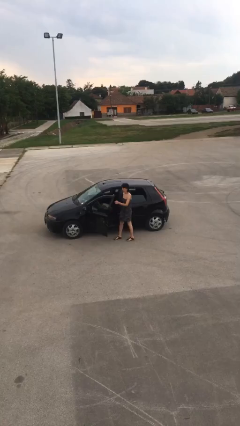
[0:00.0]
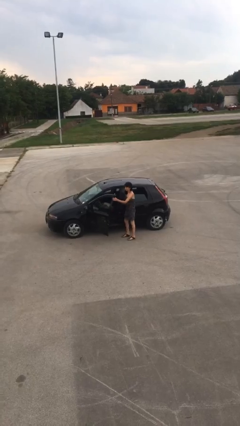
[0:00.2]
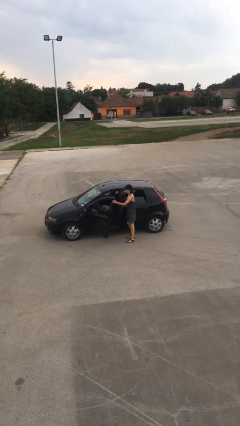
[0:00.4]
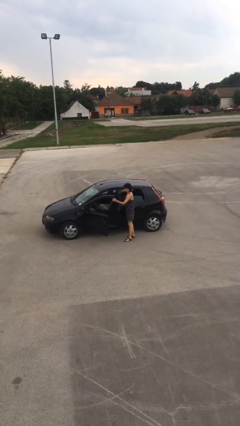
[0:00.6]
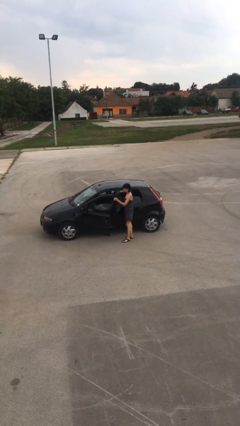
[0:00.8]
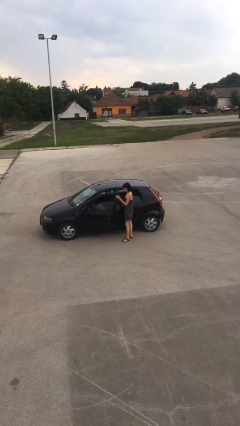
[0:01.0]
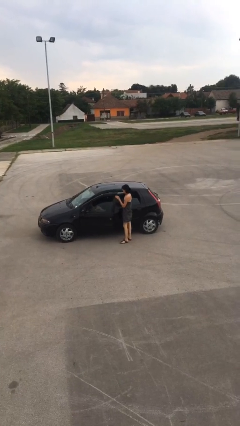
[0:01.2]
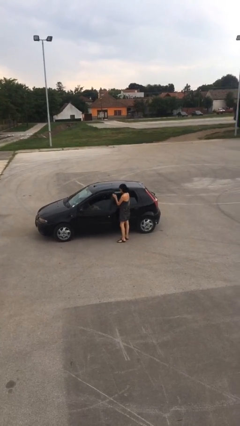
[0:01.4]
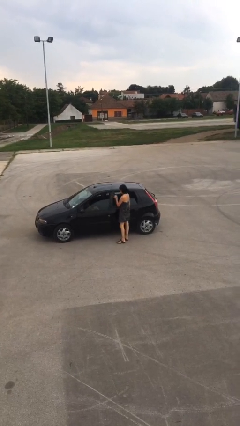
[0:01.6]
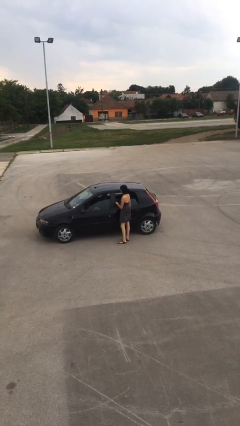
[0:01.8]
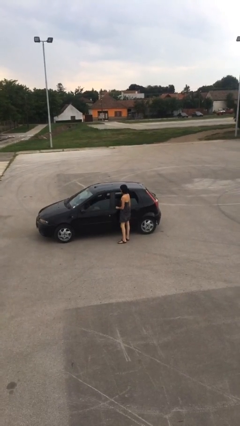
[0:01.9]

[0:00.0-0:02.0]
person closes car door

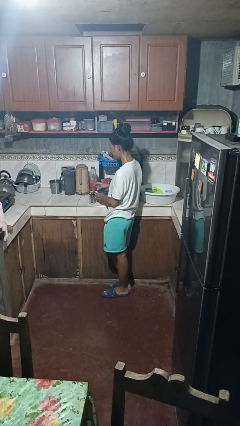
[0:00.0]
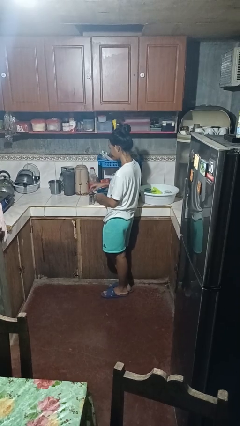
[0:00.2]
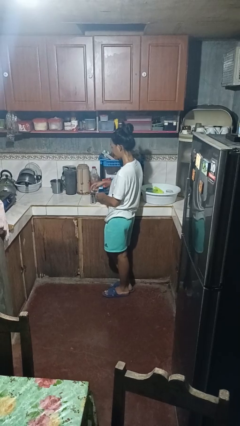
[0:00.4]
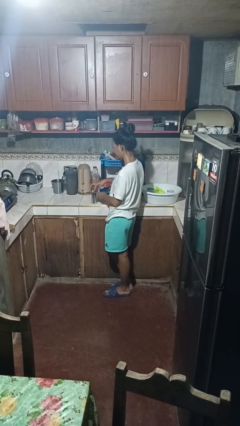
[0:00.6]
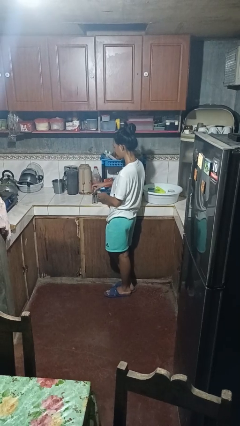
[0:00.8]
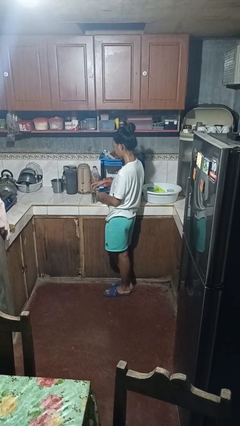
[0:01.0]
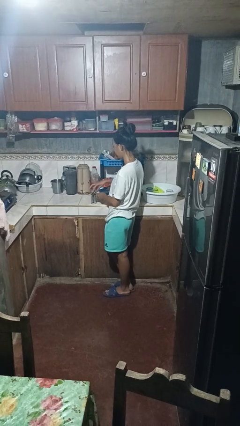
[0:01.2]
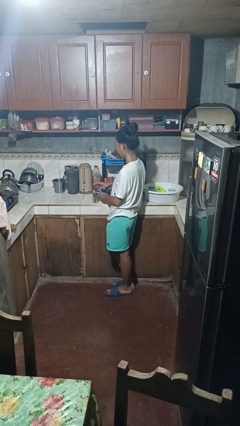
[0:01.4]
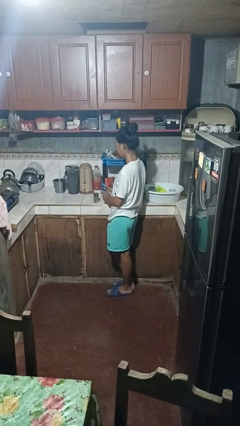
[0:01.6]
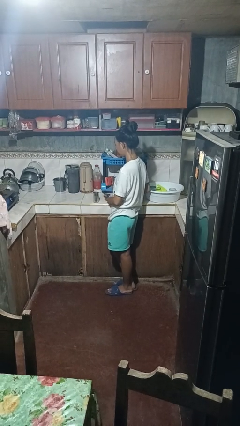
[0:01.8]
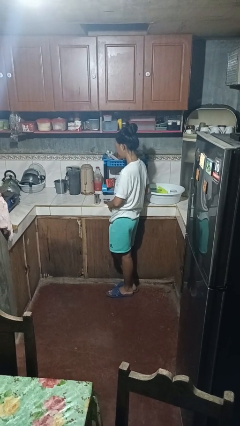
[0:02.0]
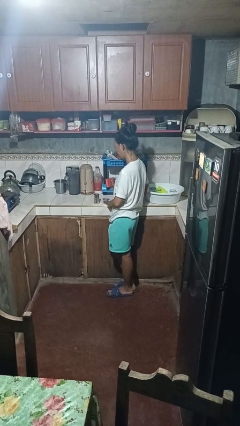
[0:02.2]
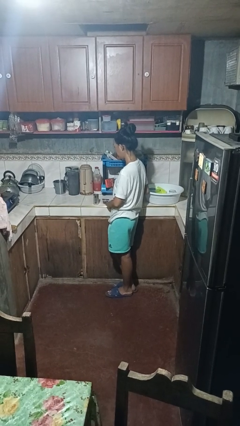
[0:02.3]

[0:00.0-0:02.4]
person opens can with can opener

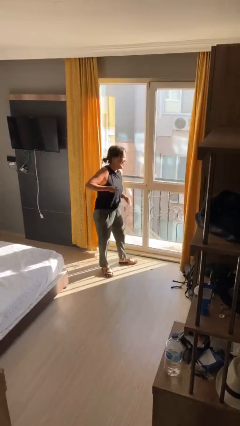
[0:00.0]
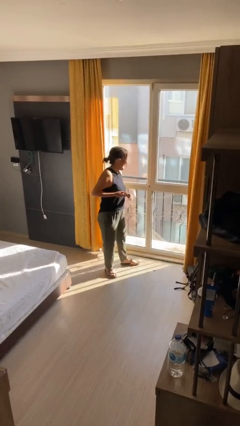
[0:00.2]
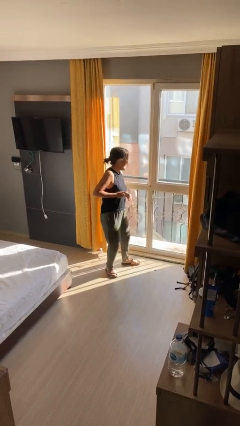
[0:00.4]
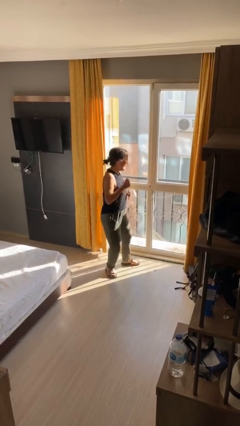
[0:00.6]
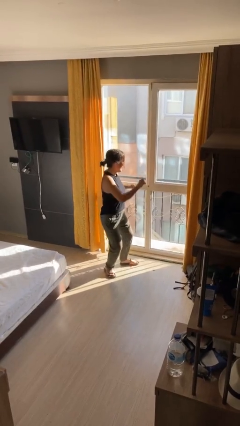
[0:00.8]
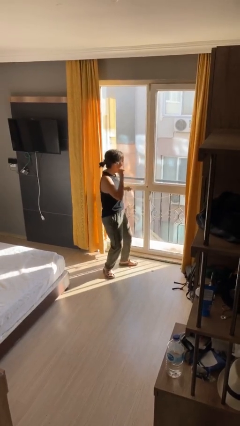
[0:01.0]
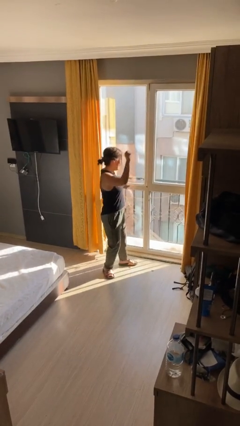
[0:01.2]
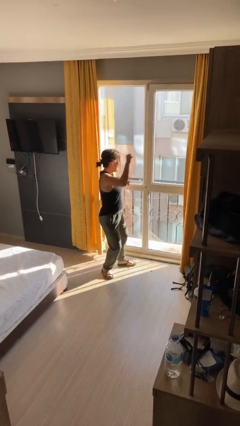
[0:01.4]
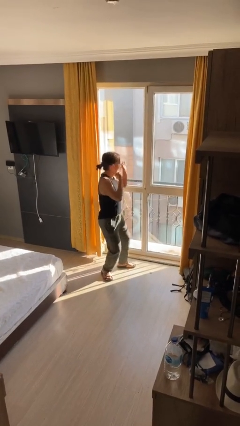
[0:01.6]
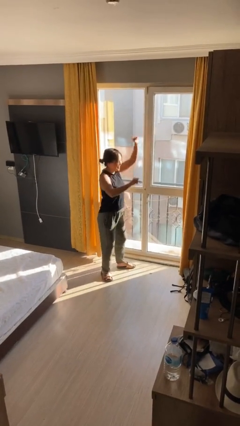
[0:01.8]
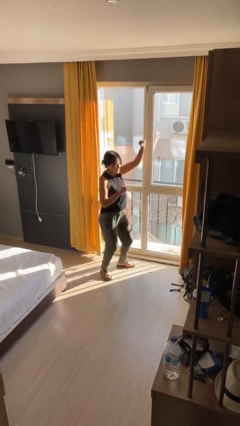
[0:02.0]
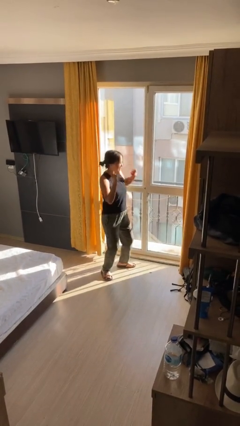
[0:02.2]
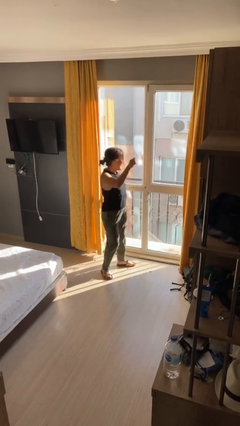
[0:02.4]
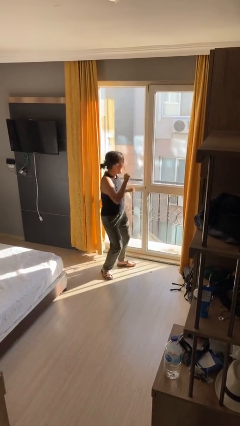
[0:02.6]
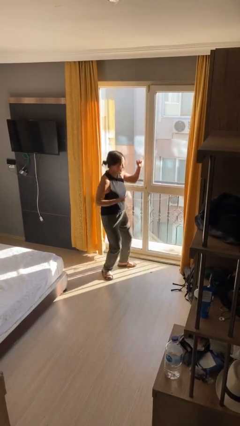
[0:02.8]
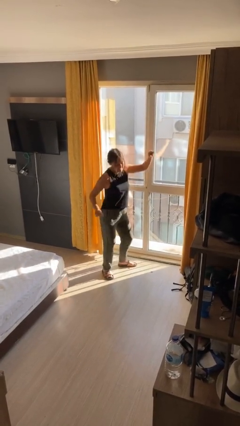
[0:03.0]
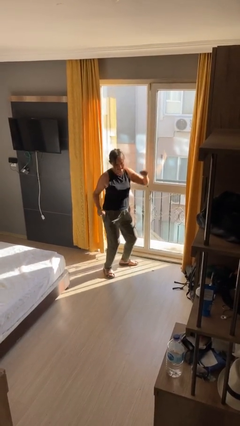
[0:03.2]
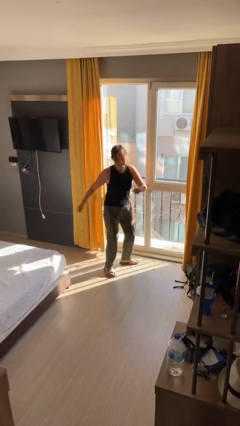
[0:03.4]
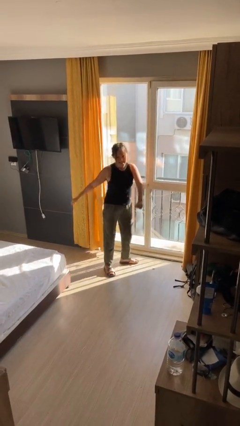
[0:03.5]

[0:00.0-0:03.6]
person dances in place

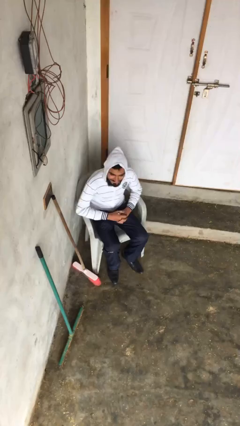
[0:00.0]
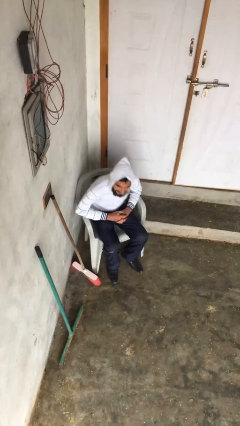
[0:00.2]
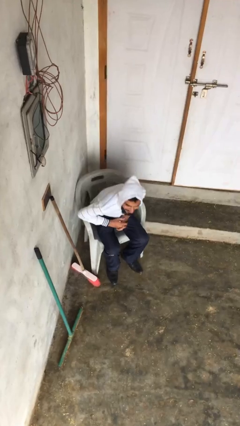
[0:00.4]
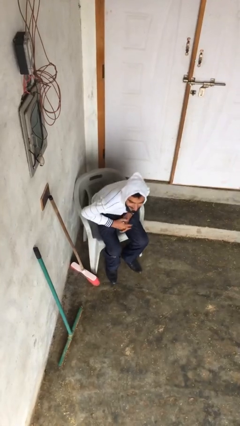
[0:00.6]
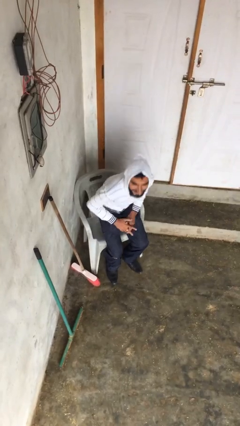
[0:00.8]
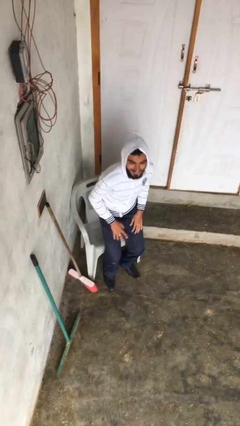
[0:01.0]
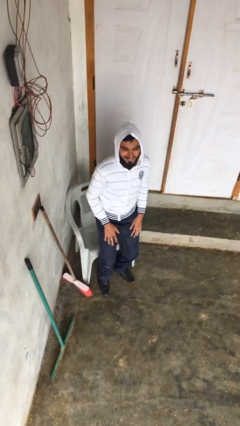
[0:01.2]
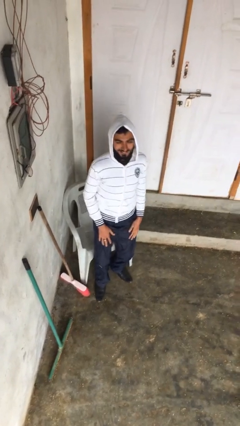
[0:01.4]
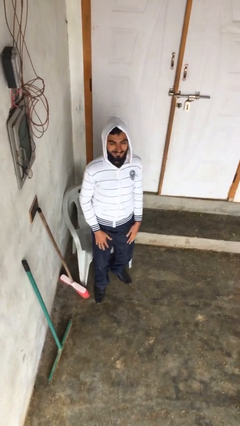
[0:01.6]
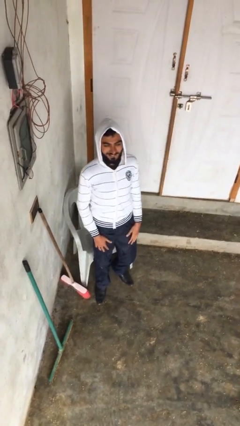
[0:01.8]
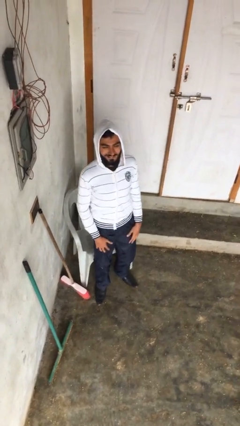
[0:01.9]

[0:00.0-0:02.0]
person stands up

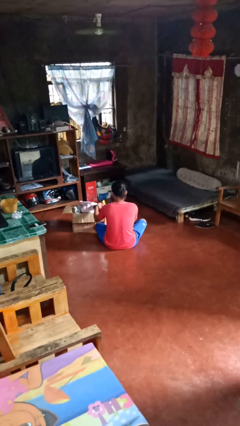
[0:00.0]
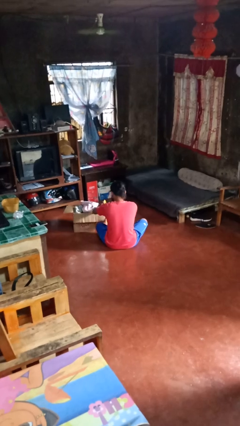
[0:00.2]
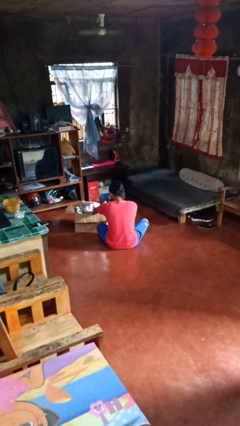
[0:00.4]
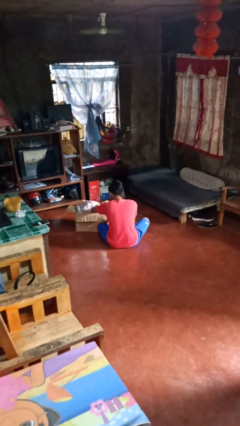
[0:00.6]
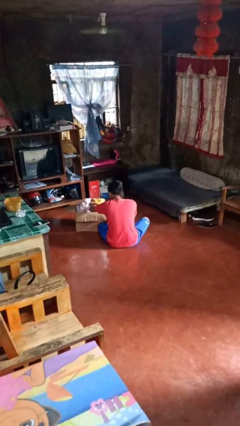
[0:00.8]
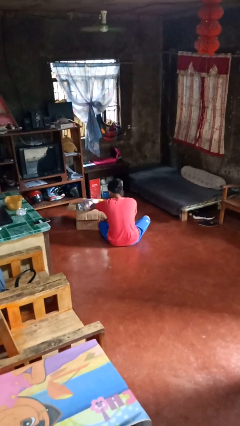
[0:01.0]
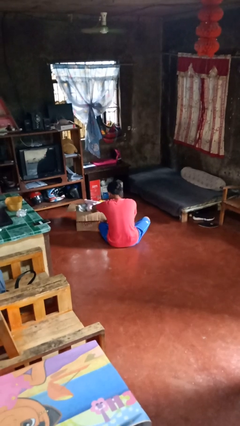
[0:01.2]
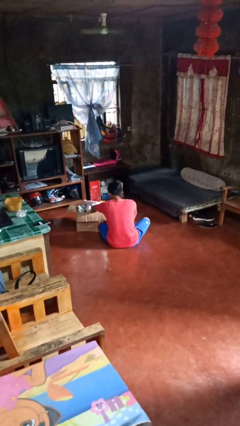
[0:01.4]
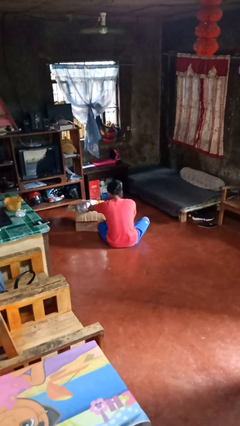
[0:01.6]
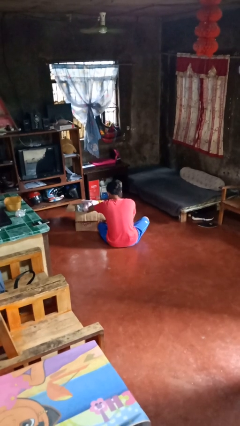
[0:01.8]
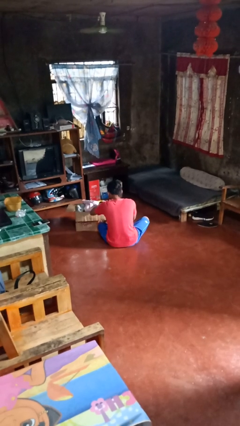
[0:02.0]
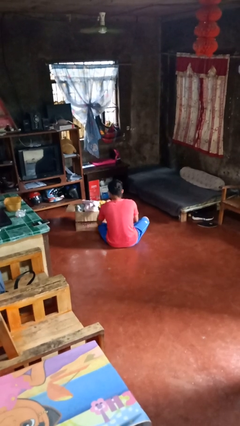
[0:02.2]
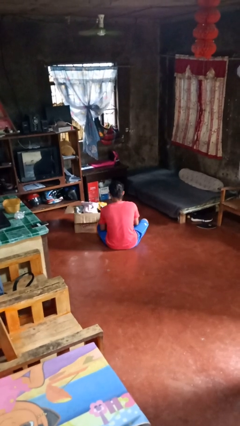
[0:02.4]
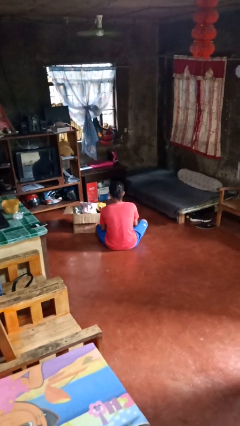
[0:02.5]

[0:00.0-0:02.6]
person searches in box

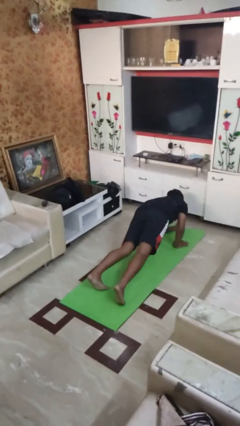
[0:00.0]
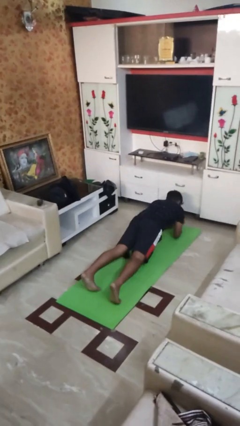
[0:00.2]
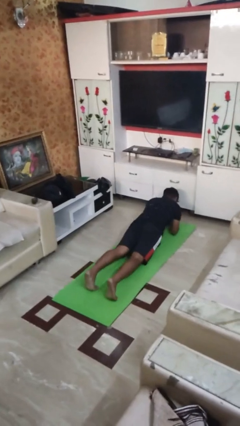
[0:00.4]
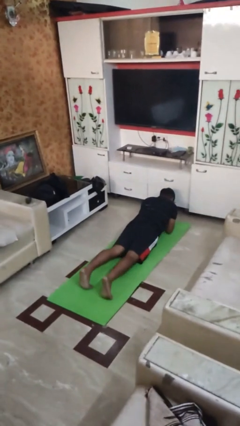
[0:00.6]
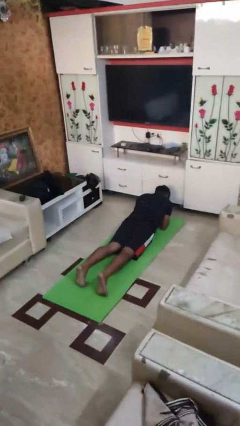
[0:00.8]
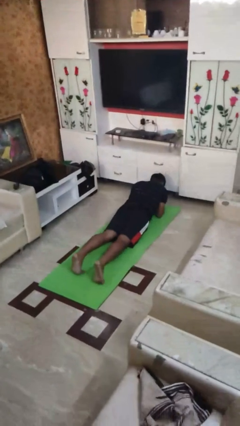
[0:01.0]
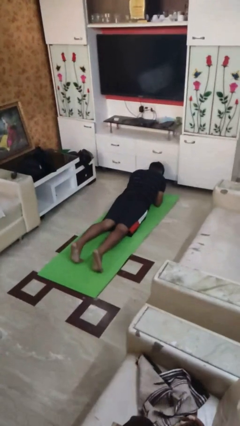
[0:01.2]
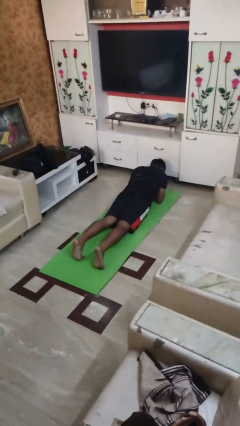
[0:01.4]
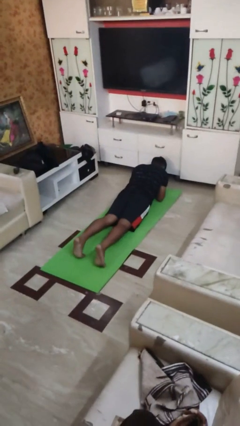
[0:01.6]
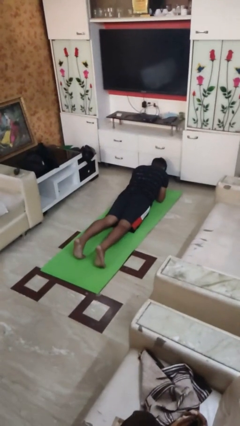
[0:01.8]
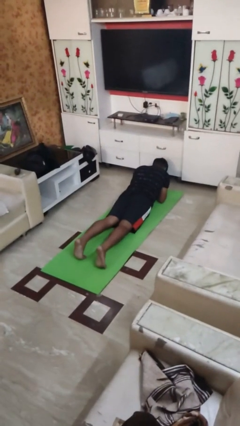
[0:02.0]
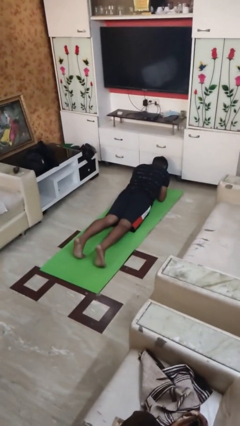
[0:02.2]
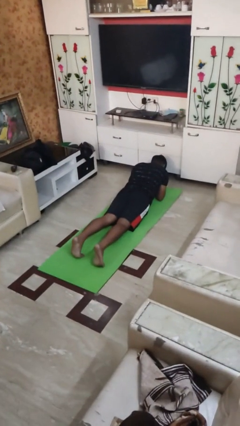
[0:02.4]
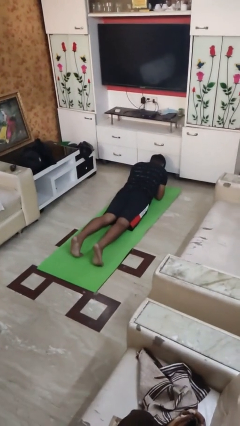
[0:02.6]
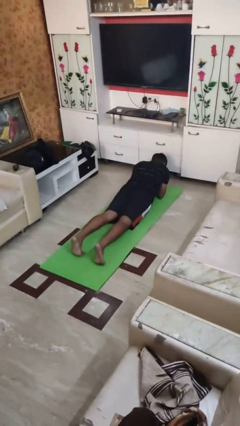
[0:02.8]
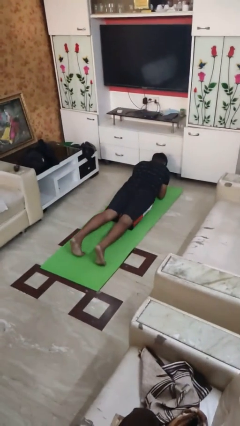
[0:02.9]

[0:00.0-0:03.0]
person exercises with plank

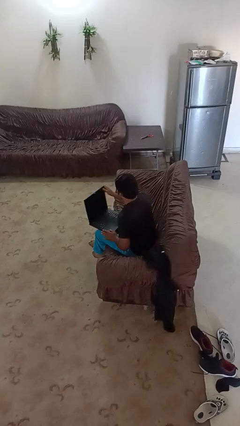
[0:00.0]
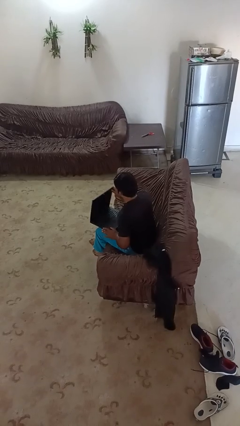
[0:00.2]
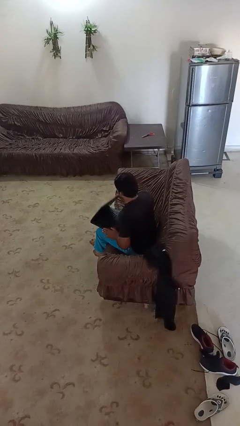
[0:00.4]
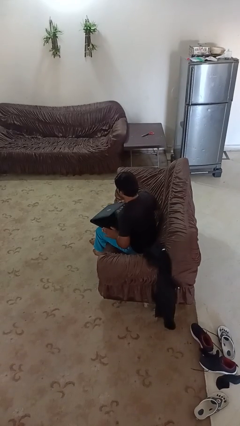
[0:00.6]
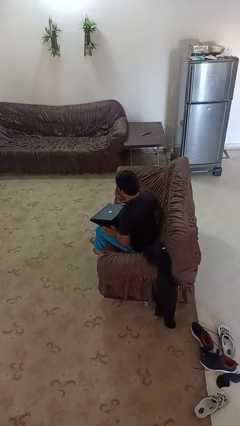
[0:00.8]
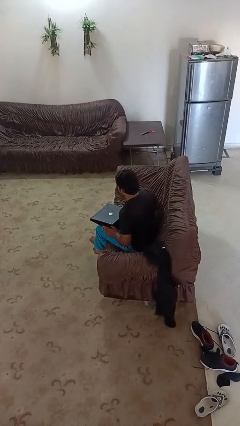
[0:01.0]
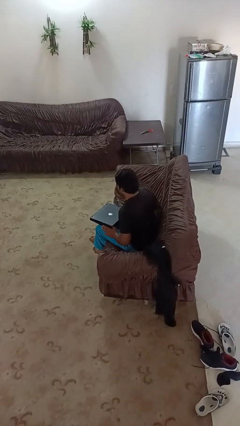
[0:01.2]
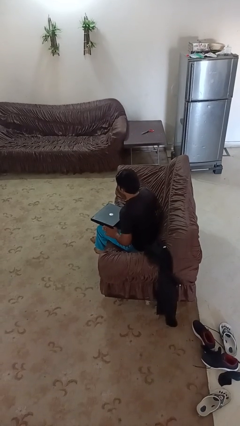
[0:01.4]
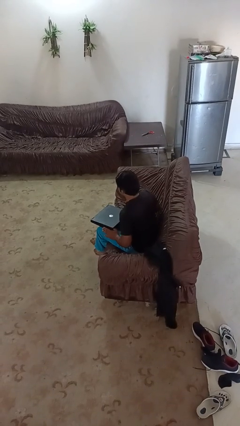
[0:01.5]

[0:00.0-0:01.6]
person closes laptop

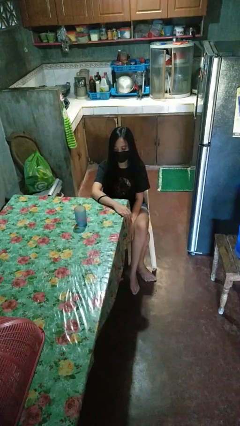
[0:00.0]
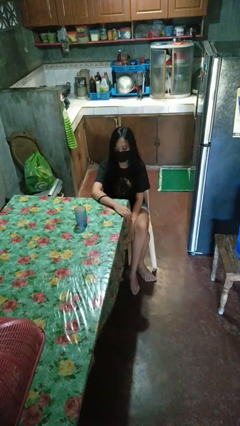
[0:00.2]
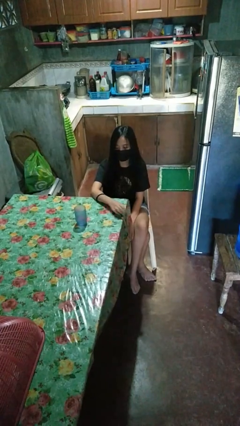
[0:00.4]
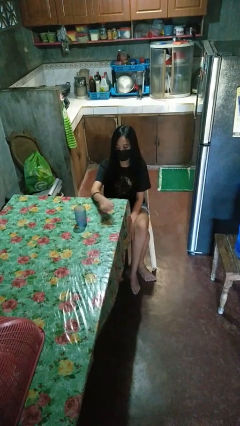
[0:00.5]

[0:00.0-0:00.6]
person knocks over glass
